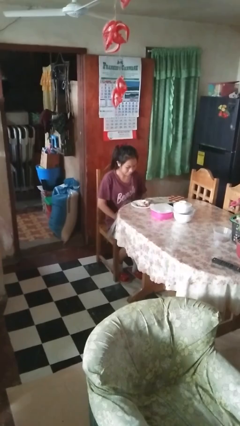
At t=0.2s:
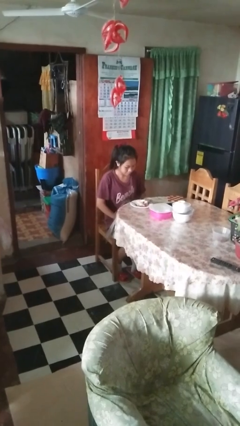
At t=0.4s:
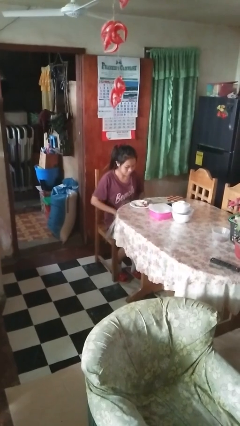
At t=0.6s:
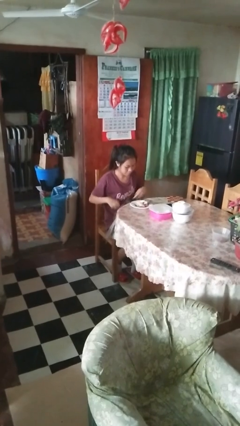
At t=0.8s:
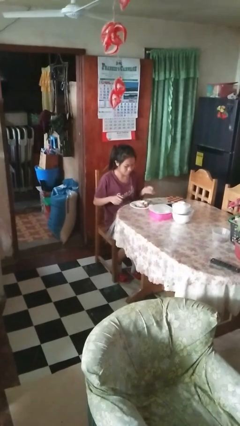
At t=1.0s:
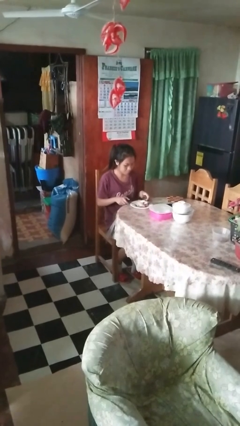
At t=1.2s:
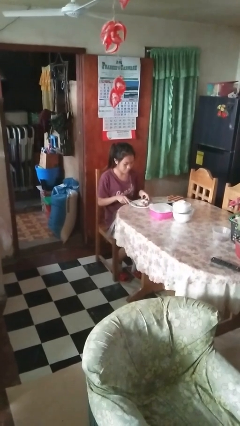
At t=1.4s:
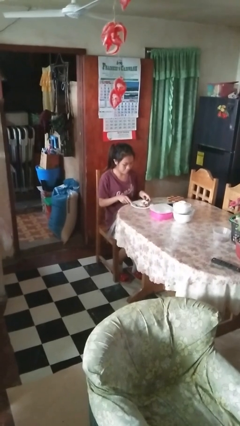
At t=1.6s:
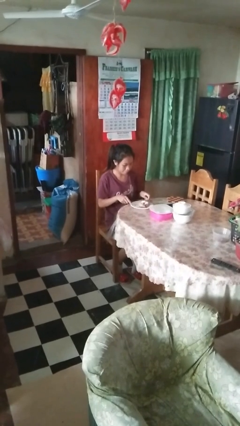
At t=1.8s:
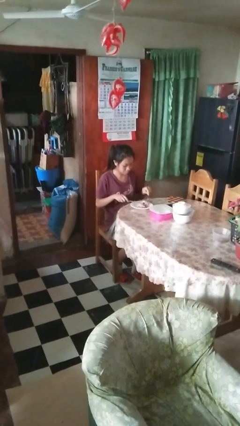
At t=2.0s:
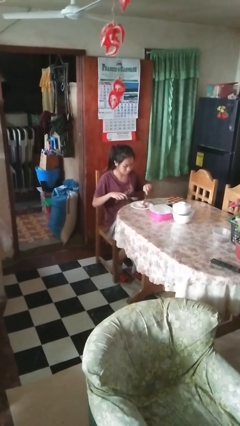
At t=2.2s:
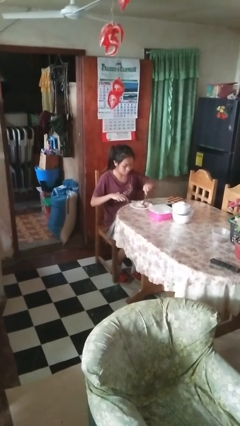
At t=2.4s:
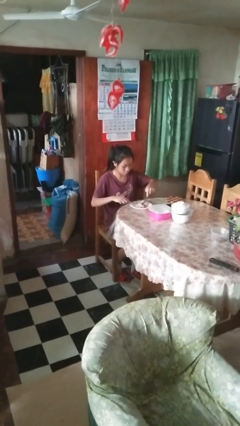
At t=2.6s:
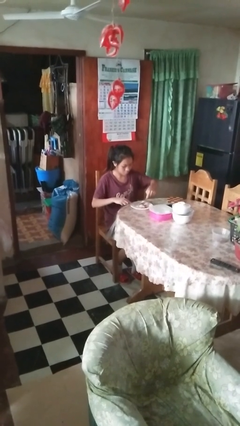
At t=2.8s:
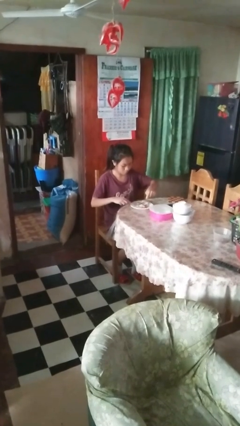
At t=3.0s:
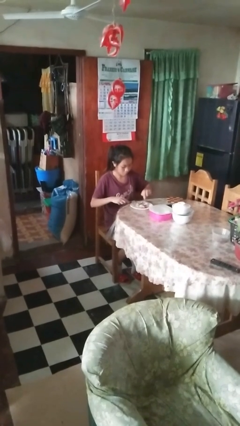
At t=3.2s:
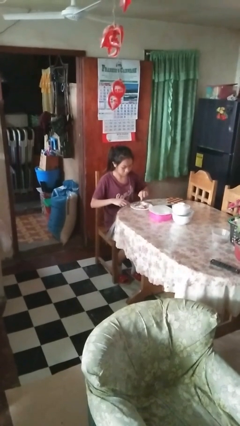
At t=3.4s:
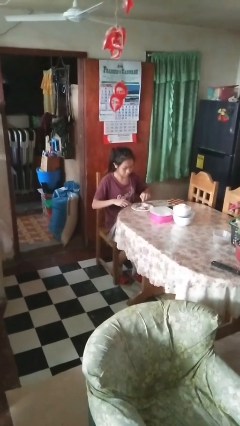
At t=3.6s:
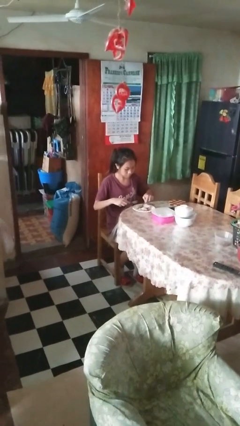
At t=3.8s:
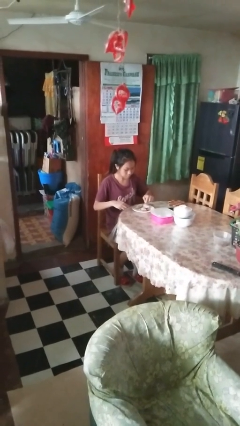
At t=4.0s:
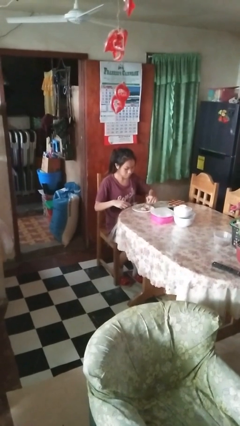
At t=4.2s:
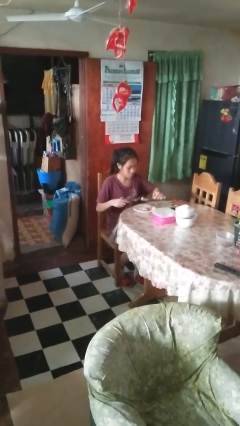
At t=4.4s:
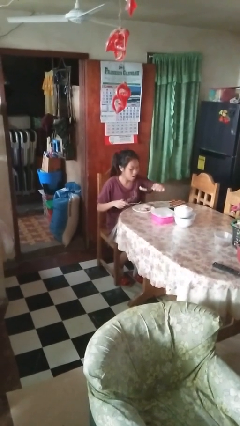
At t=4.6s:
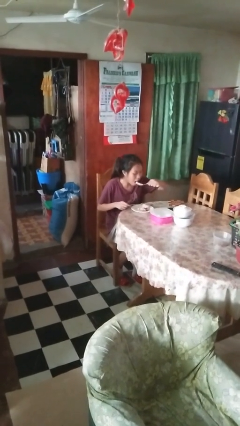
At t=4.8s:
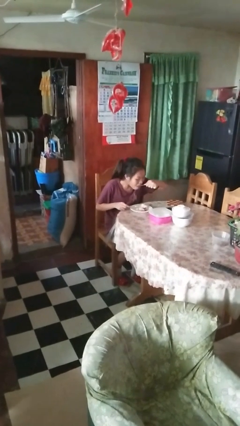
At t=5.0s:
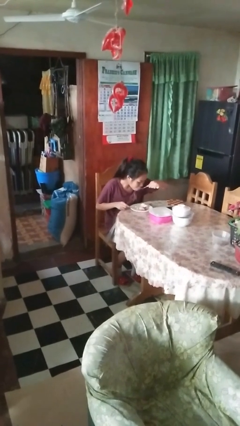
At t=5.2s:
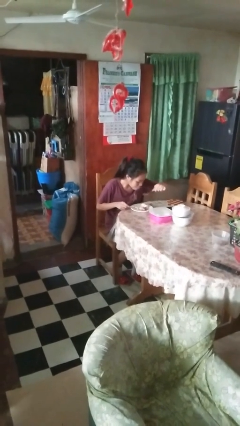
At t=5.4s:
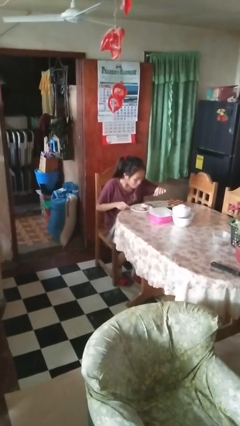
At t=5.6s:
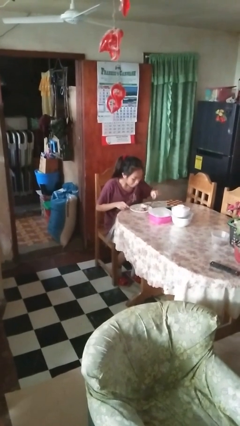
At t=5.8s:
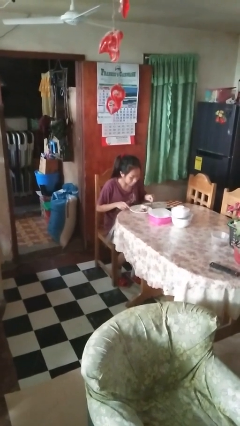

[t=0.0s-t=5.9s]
person eats with utensil

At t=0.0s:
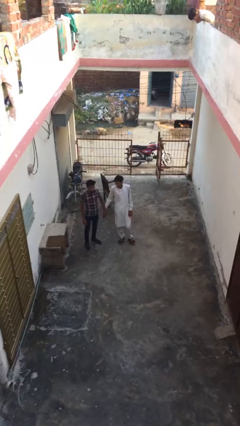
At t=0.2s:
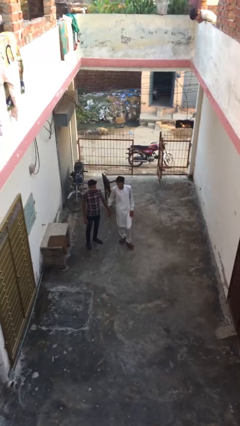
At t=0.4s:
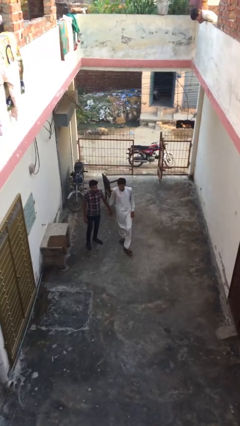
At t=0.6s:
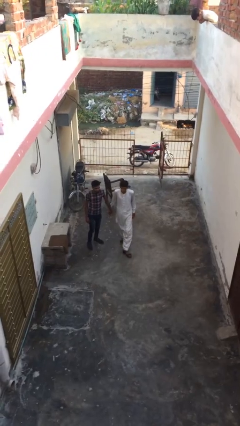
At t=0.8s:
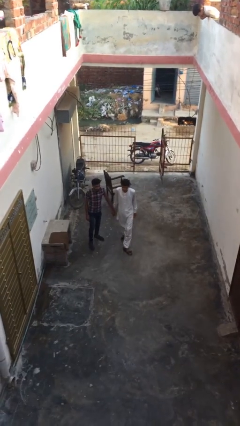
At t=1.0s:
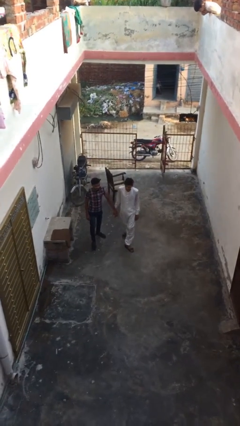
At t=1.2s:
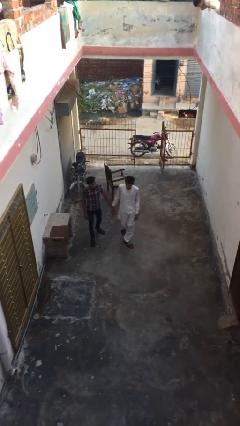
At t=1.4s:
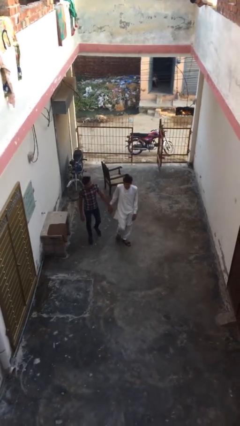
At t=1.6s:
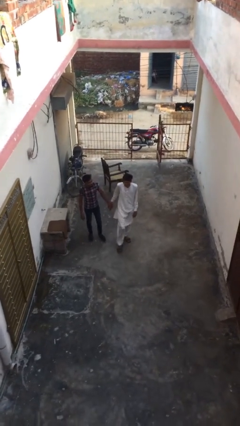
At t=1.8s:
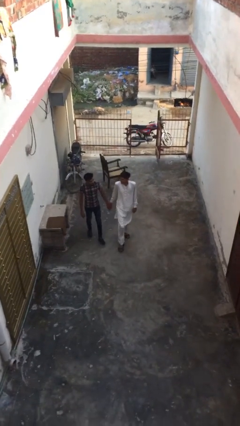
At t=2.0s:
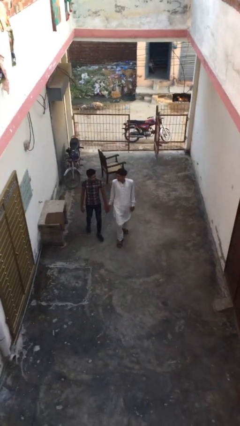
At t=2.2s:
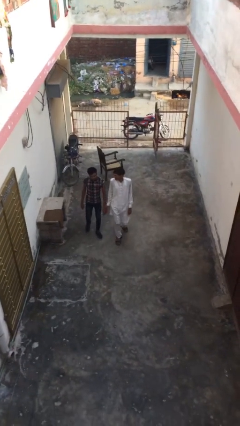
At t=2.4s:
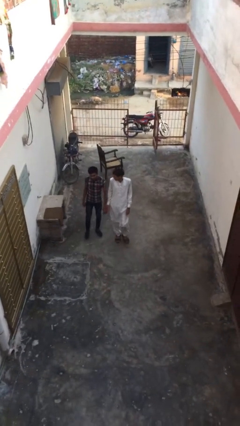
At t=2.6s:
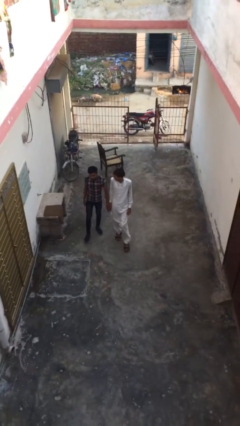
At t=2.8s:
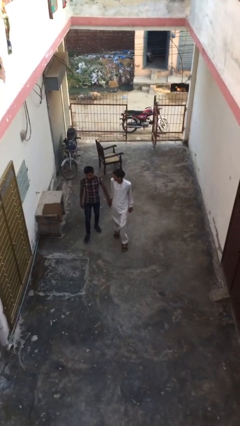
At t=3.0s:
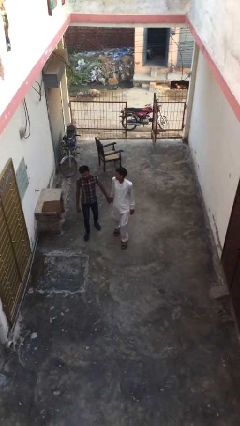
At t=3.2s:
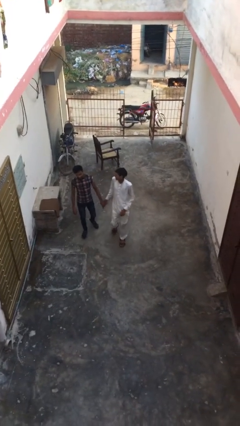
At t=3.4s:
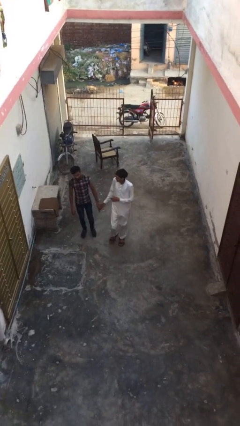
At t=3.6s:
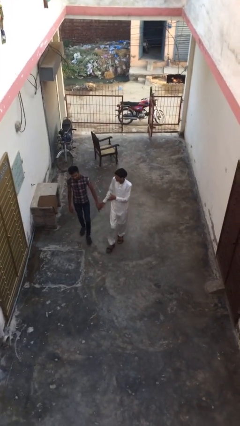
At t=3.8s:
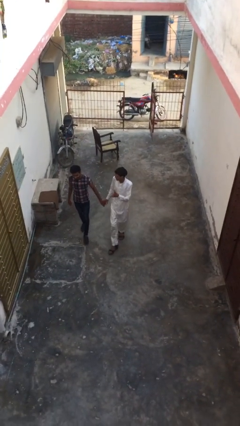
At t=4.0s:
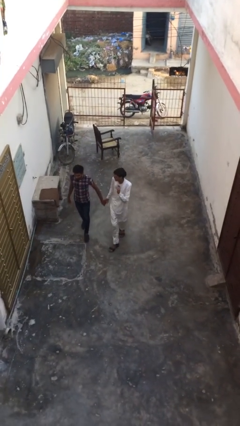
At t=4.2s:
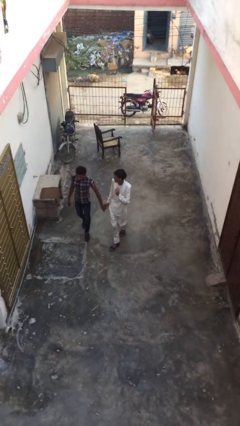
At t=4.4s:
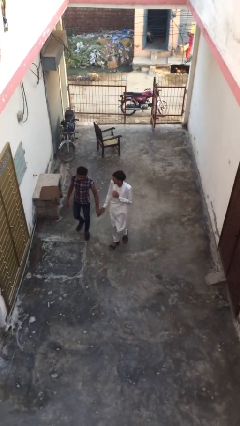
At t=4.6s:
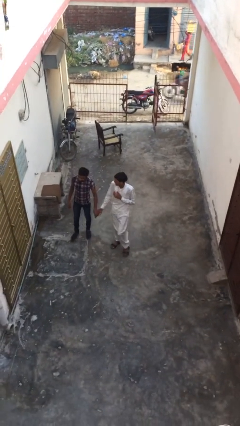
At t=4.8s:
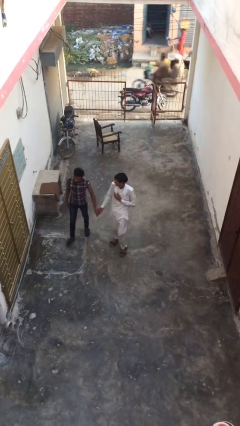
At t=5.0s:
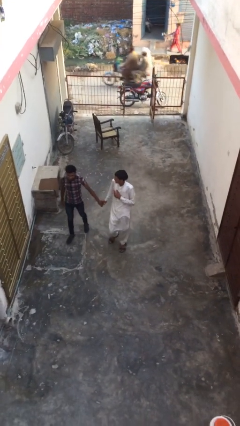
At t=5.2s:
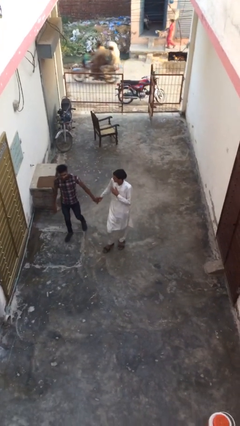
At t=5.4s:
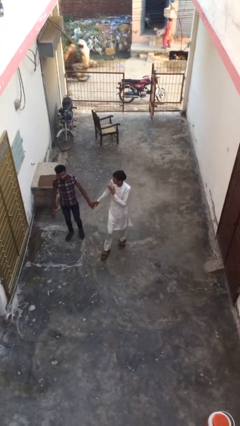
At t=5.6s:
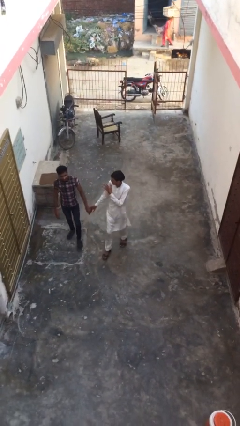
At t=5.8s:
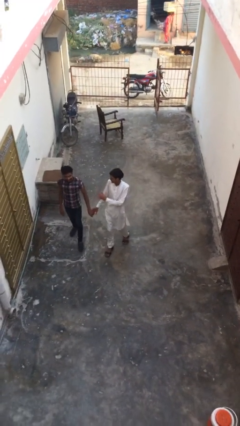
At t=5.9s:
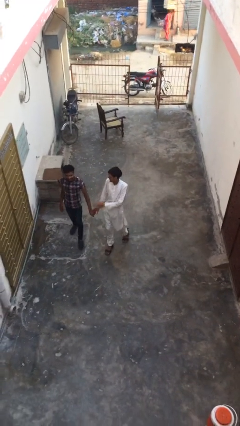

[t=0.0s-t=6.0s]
person holds hand

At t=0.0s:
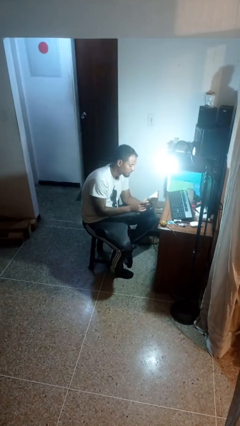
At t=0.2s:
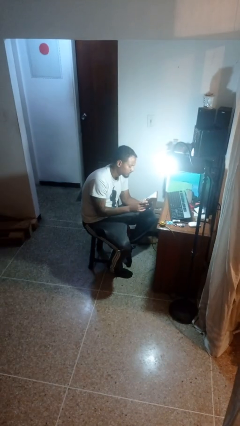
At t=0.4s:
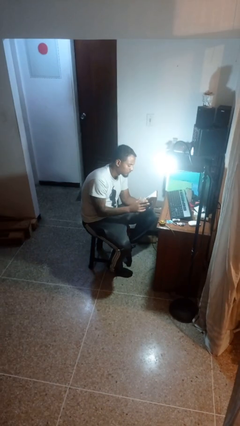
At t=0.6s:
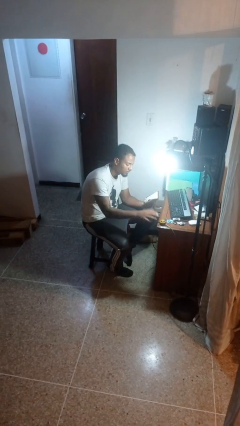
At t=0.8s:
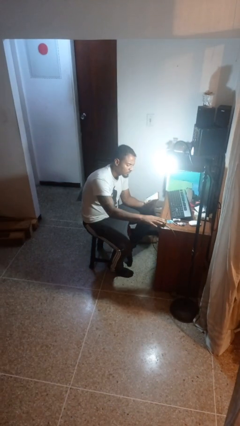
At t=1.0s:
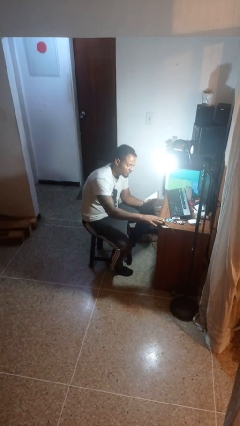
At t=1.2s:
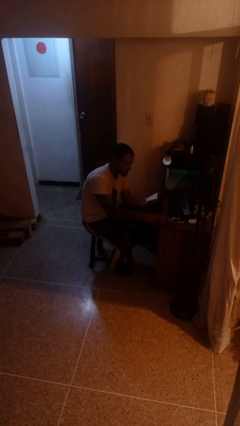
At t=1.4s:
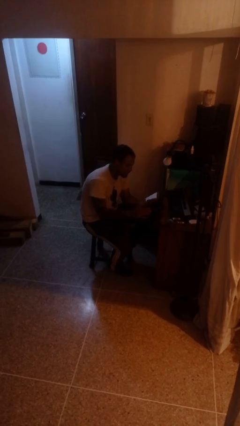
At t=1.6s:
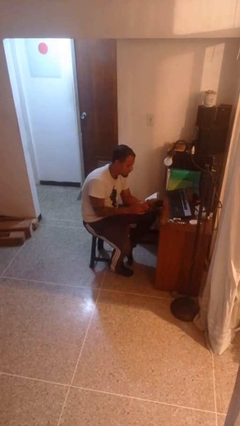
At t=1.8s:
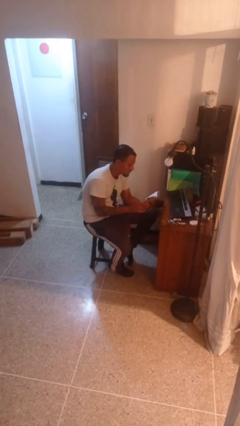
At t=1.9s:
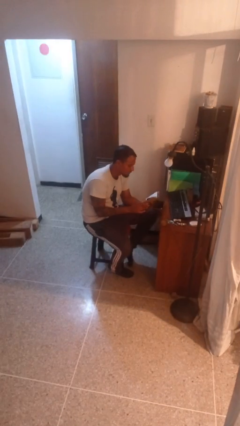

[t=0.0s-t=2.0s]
person turns off lamp

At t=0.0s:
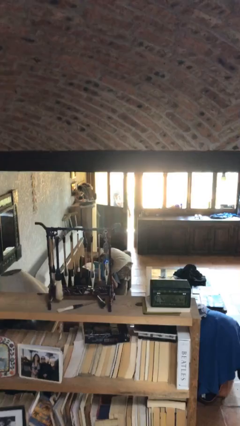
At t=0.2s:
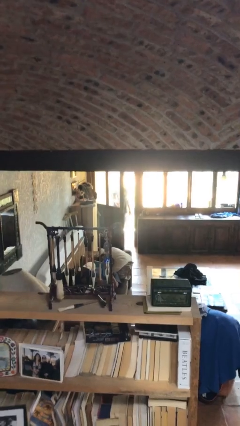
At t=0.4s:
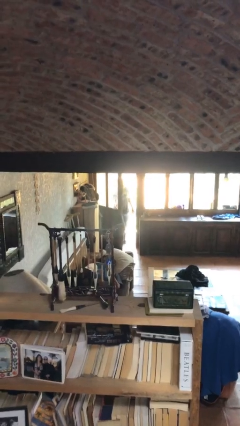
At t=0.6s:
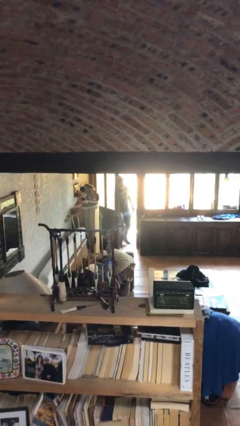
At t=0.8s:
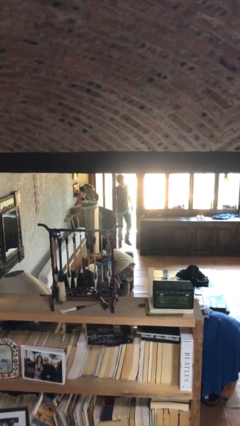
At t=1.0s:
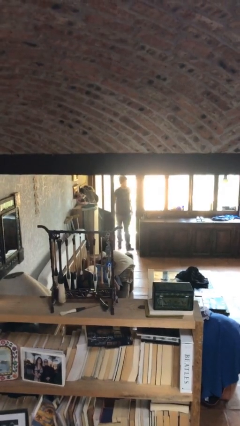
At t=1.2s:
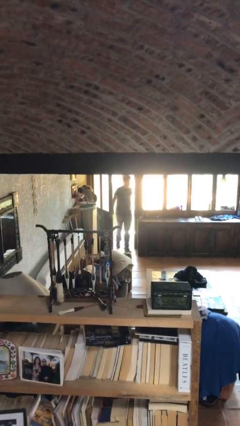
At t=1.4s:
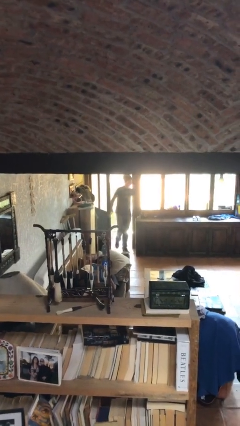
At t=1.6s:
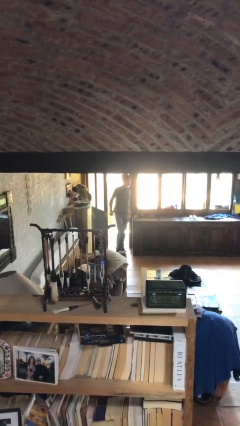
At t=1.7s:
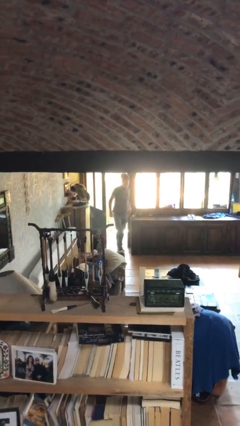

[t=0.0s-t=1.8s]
person enters scene through structure

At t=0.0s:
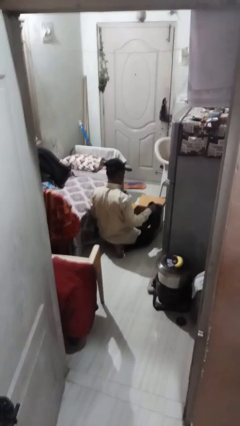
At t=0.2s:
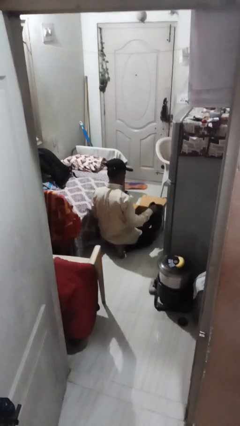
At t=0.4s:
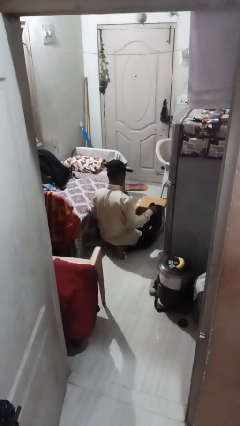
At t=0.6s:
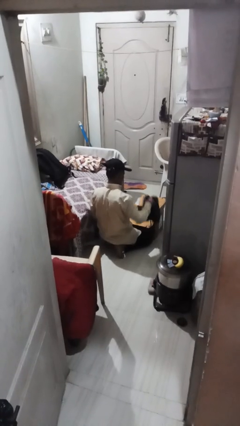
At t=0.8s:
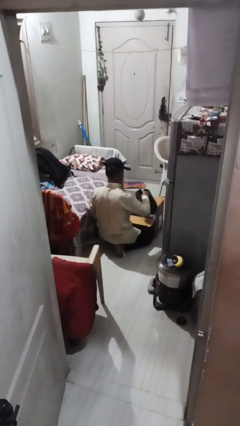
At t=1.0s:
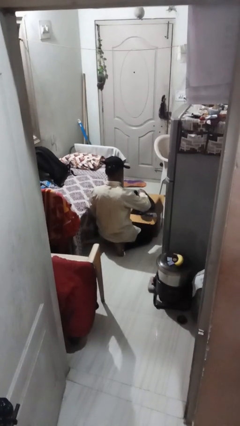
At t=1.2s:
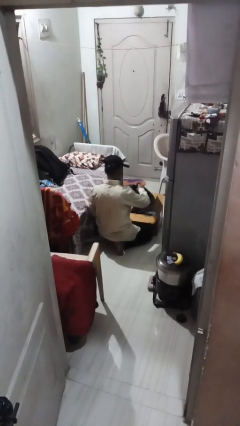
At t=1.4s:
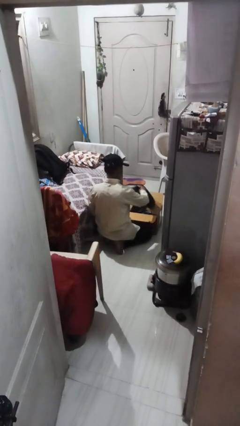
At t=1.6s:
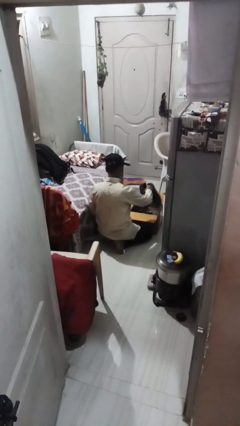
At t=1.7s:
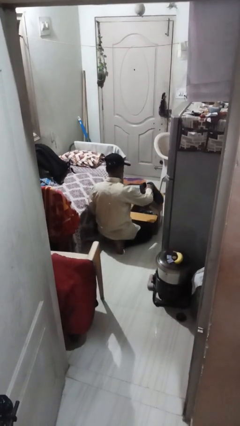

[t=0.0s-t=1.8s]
person puts object into box
